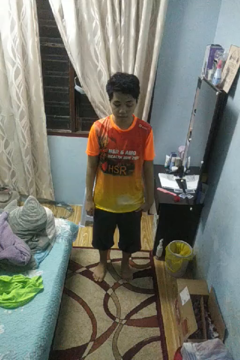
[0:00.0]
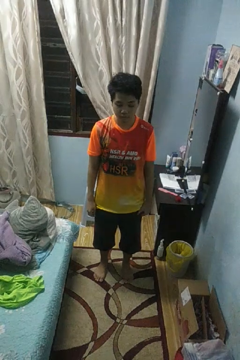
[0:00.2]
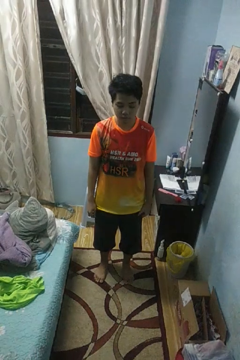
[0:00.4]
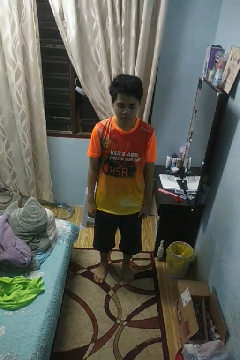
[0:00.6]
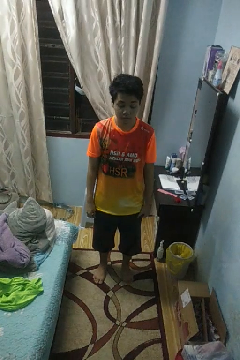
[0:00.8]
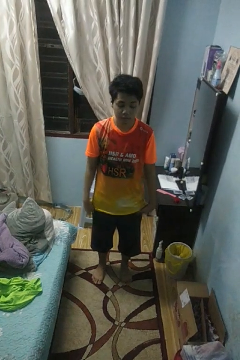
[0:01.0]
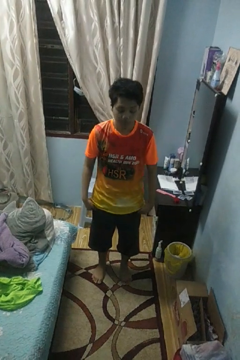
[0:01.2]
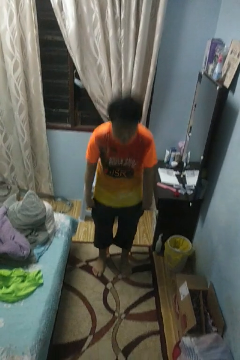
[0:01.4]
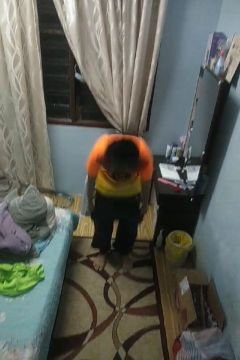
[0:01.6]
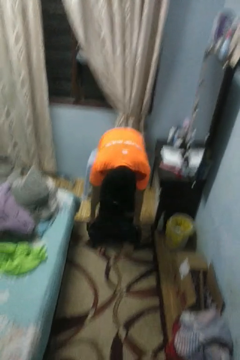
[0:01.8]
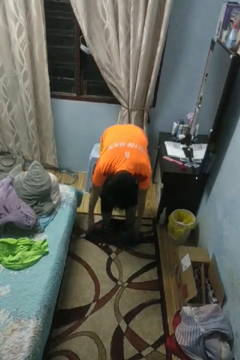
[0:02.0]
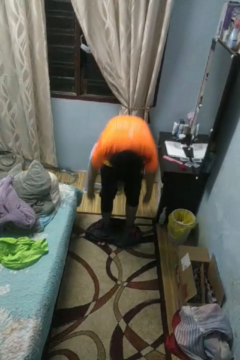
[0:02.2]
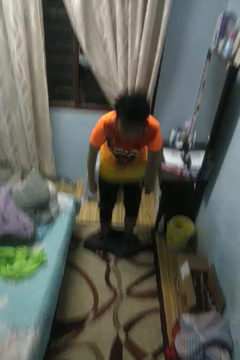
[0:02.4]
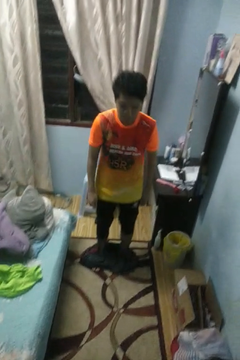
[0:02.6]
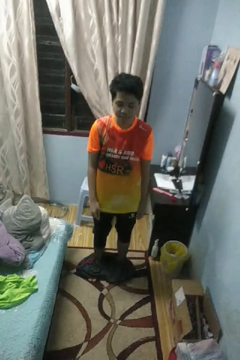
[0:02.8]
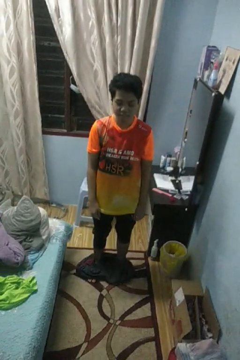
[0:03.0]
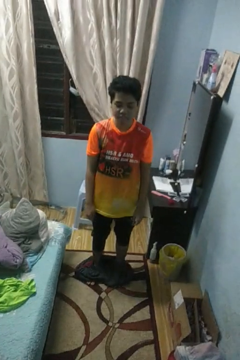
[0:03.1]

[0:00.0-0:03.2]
person takes off pants

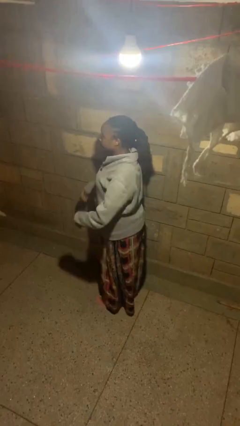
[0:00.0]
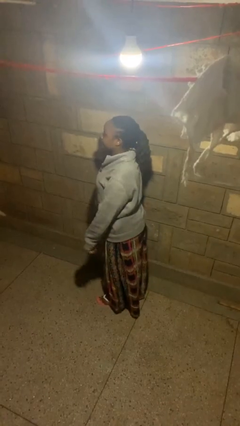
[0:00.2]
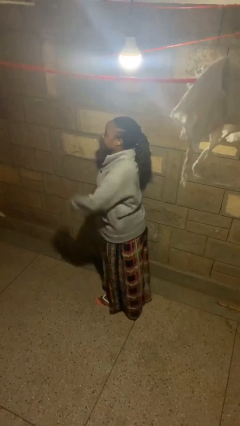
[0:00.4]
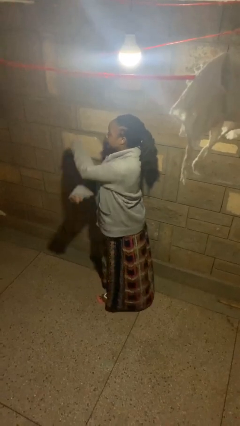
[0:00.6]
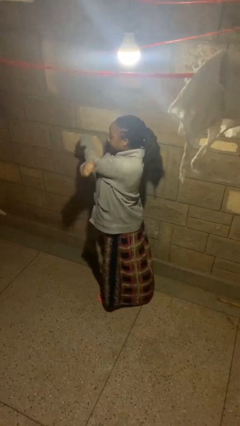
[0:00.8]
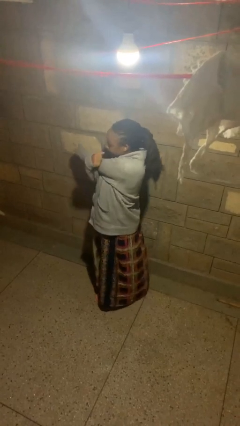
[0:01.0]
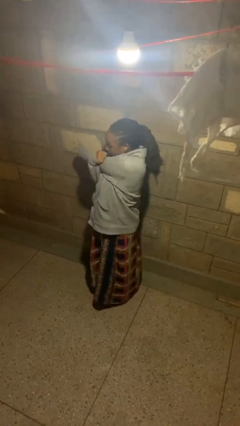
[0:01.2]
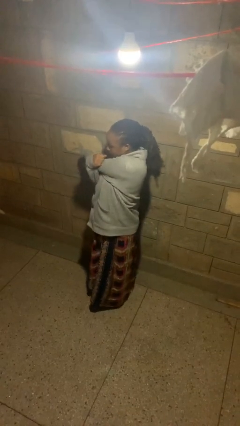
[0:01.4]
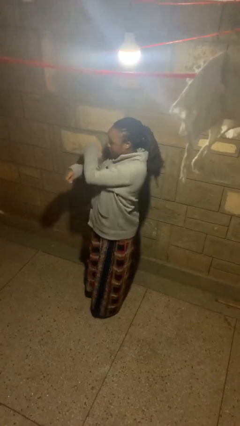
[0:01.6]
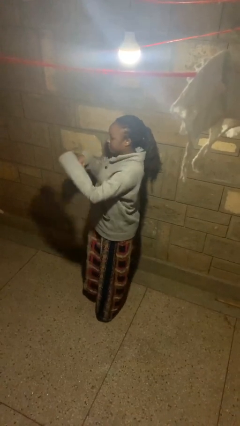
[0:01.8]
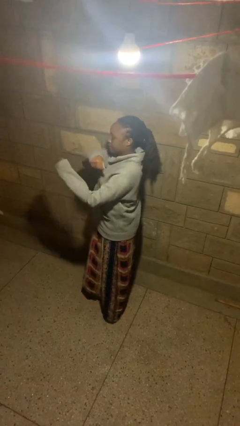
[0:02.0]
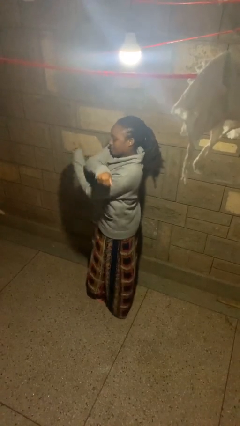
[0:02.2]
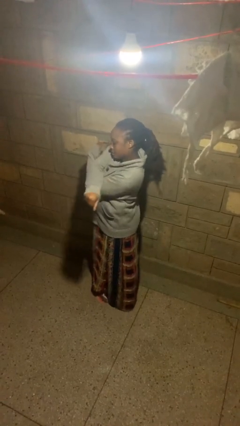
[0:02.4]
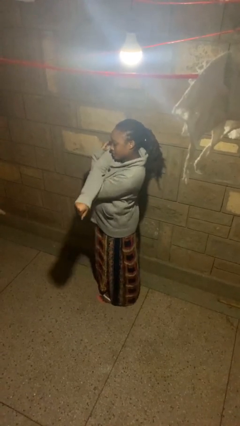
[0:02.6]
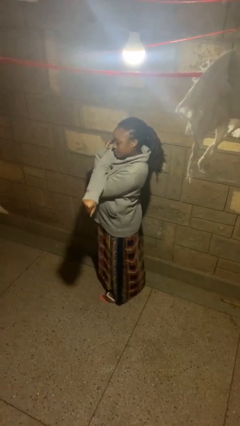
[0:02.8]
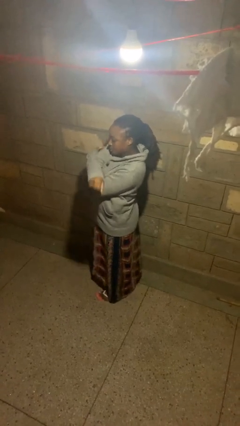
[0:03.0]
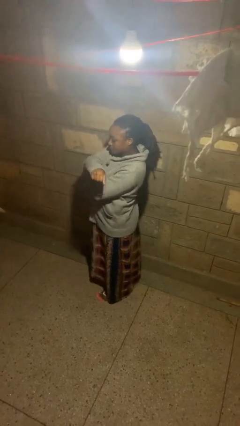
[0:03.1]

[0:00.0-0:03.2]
person stretches arms to side

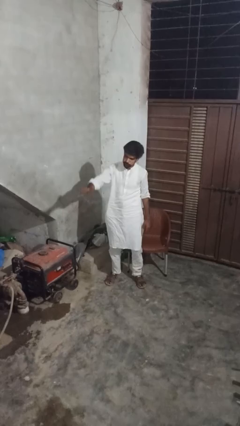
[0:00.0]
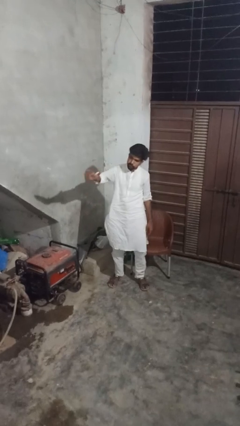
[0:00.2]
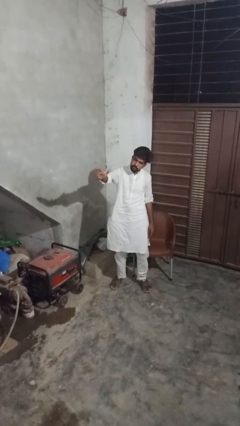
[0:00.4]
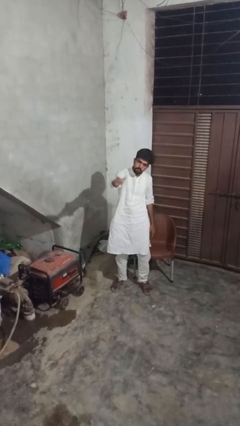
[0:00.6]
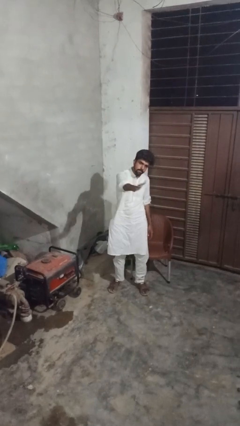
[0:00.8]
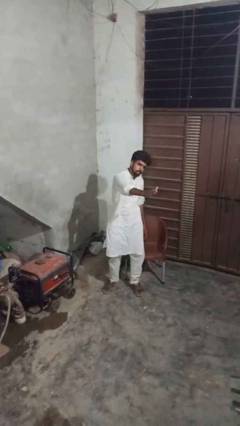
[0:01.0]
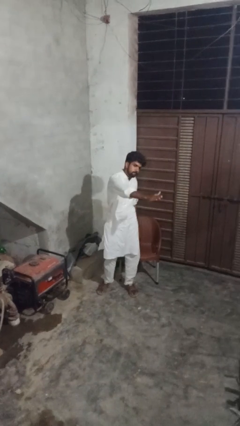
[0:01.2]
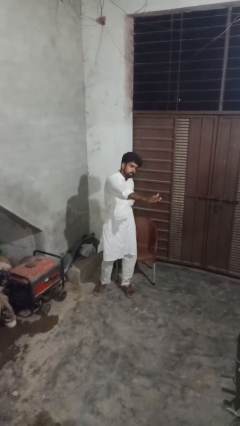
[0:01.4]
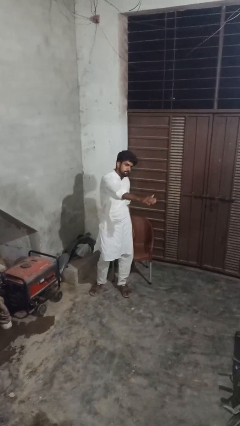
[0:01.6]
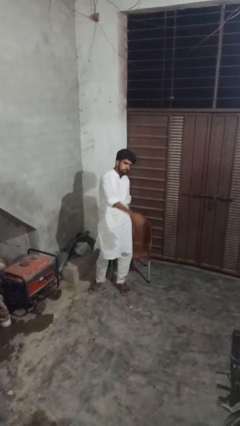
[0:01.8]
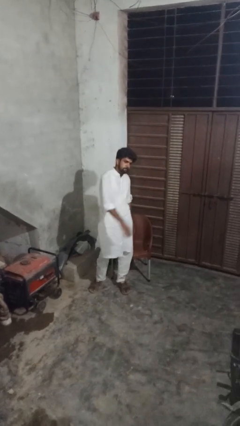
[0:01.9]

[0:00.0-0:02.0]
person gestures swipe left

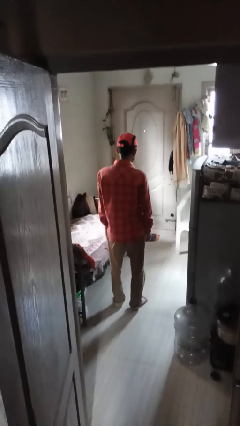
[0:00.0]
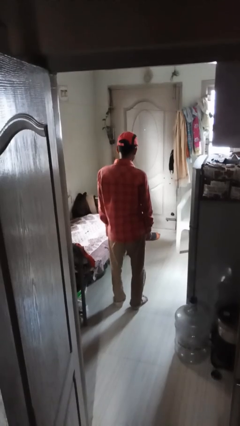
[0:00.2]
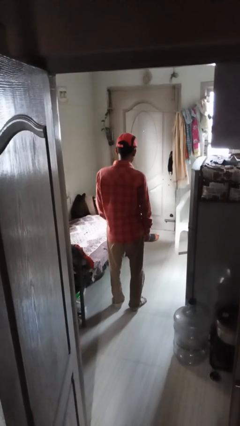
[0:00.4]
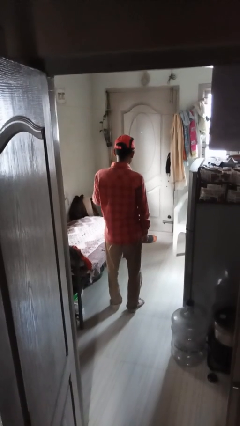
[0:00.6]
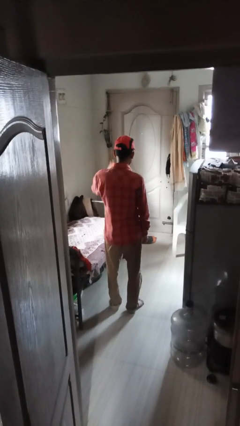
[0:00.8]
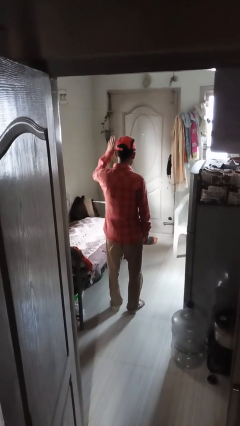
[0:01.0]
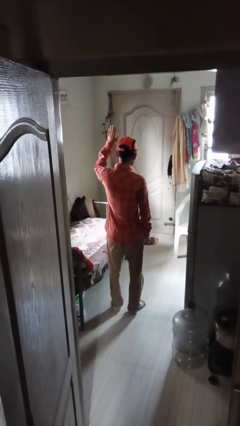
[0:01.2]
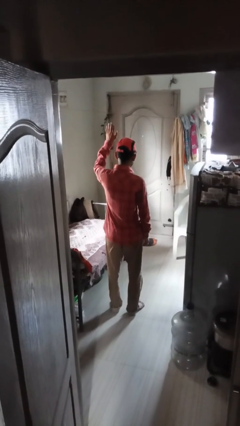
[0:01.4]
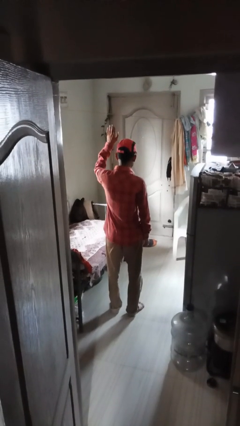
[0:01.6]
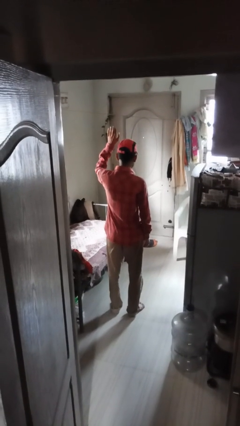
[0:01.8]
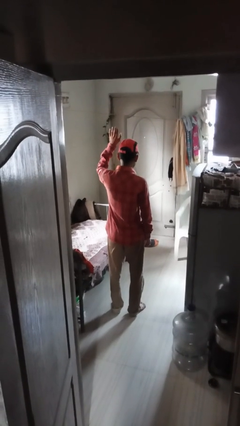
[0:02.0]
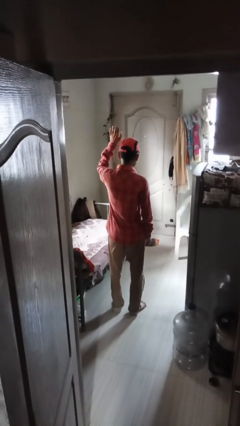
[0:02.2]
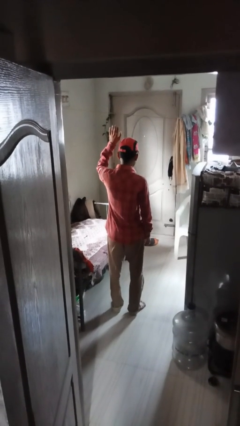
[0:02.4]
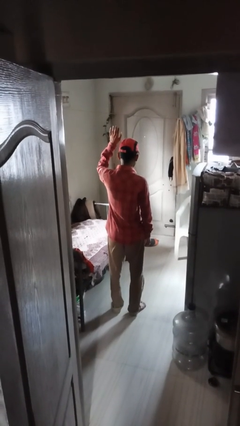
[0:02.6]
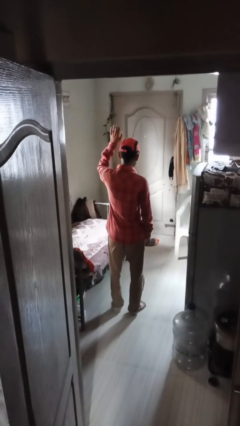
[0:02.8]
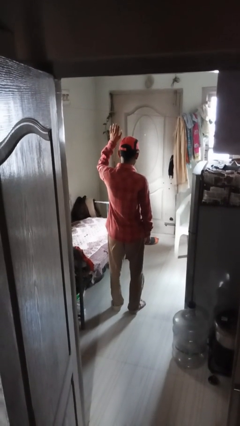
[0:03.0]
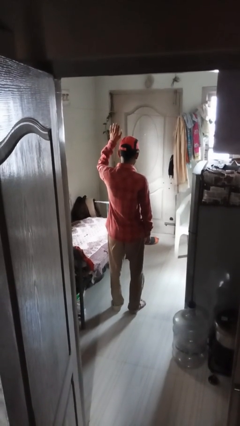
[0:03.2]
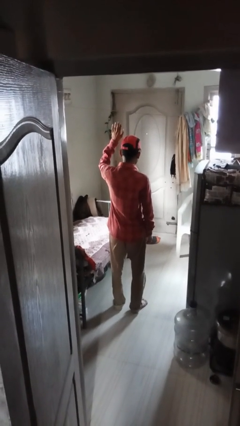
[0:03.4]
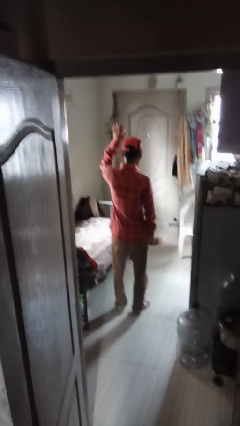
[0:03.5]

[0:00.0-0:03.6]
person gestures raise hand

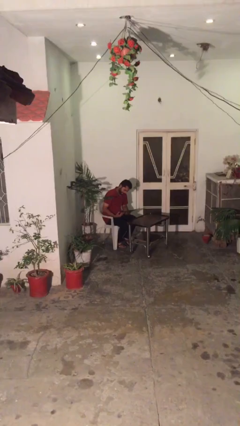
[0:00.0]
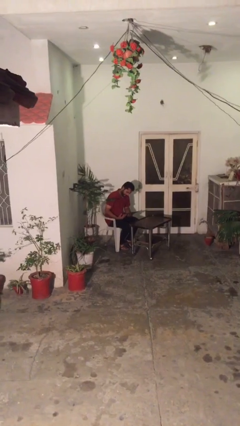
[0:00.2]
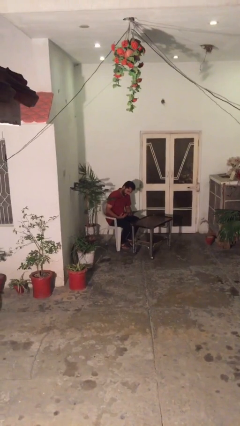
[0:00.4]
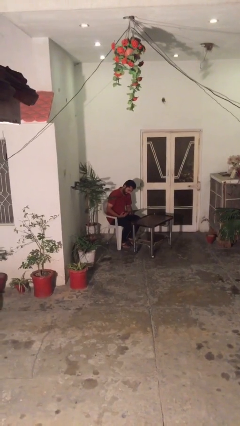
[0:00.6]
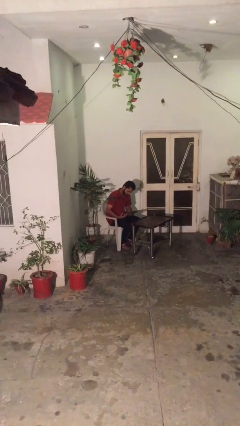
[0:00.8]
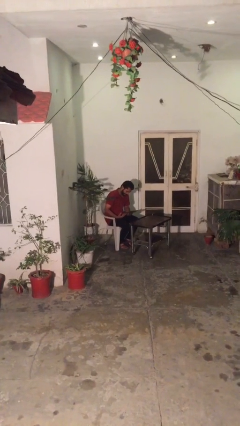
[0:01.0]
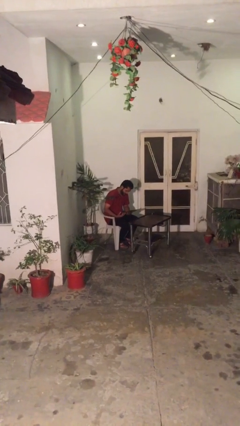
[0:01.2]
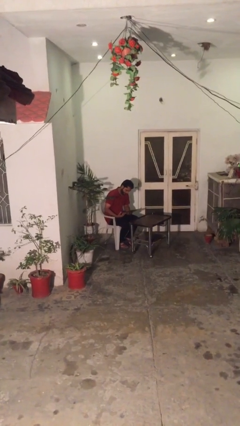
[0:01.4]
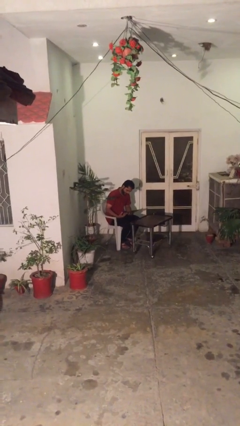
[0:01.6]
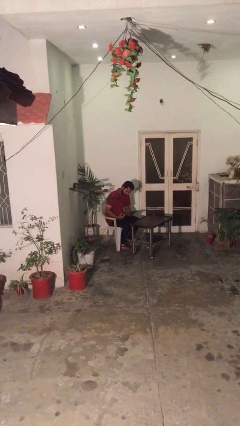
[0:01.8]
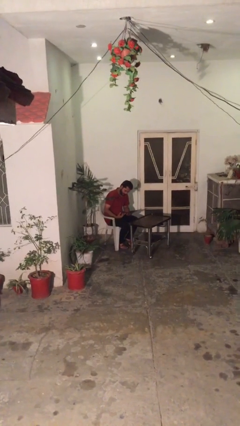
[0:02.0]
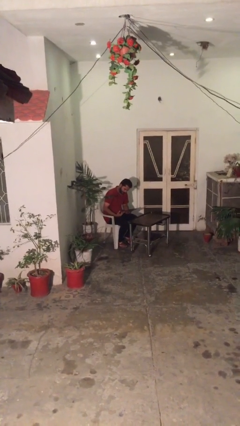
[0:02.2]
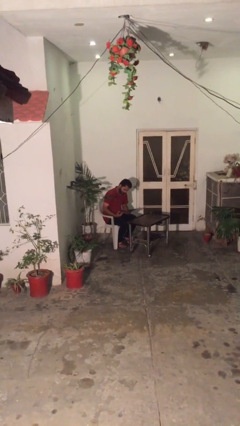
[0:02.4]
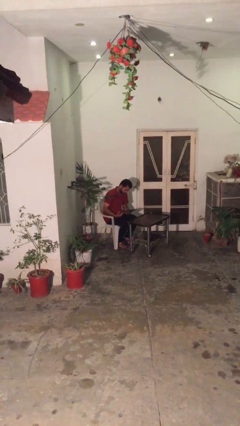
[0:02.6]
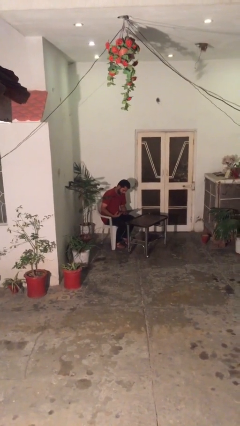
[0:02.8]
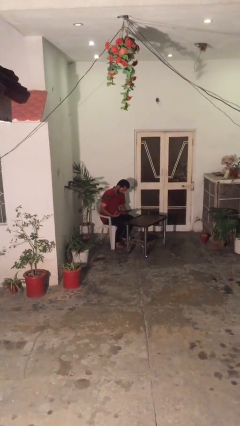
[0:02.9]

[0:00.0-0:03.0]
person reads document

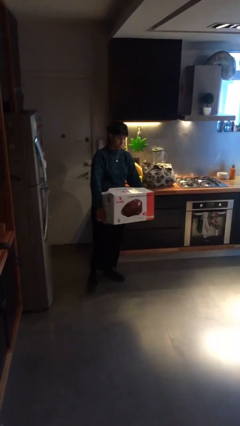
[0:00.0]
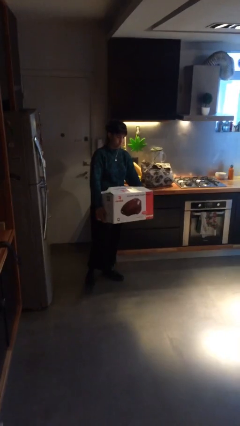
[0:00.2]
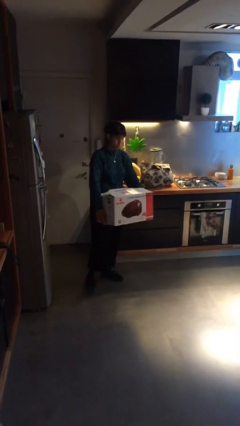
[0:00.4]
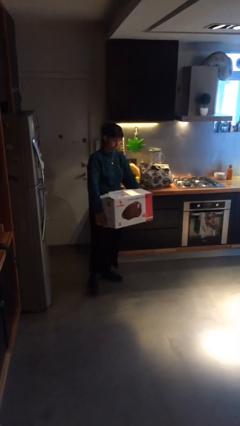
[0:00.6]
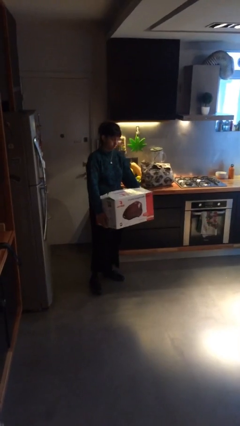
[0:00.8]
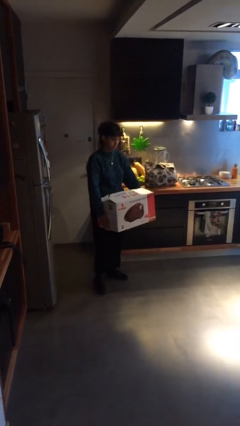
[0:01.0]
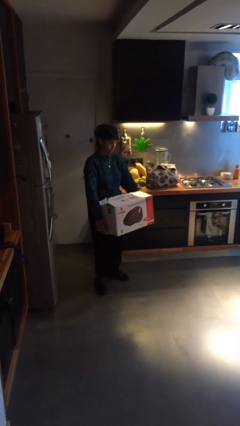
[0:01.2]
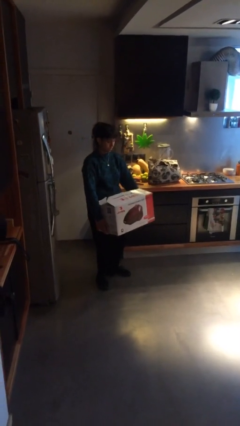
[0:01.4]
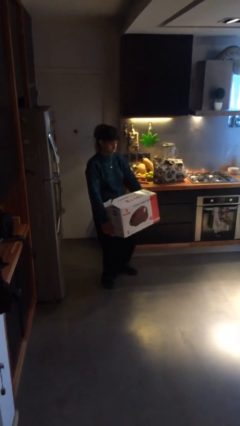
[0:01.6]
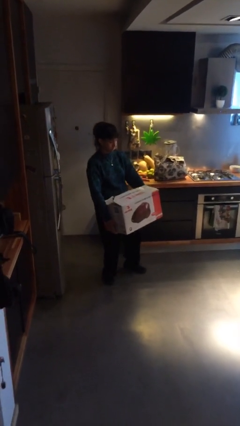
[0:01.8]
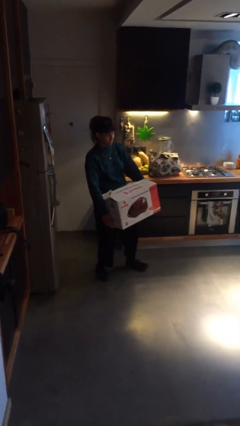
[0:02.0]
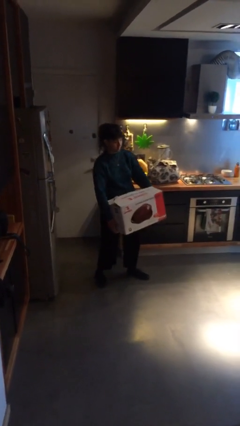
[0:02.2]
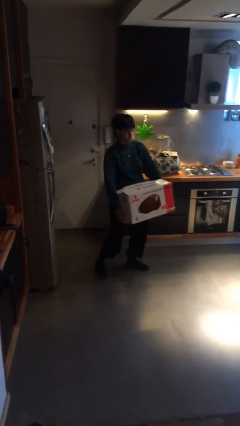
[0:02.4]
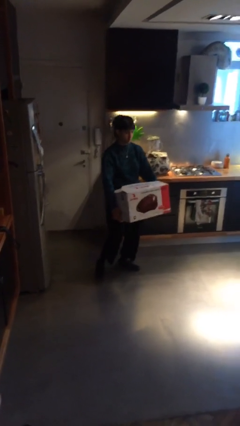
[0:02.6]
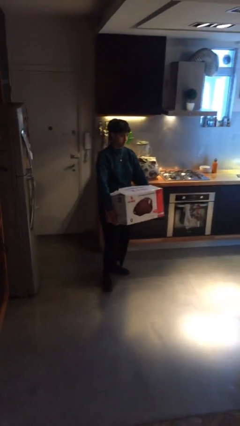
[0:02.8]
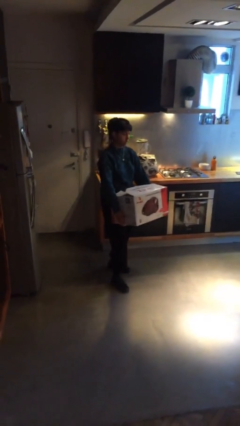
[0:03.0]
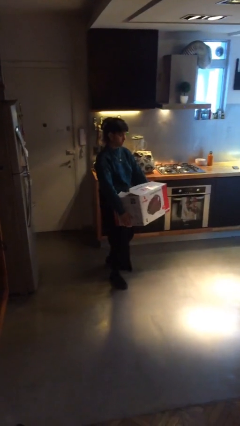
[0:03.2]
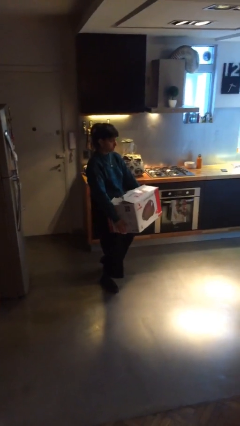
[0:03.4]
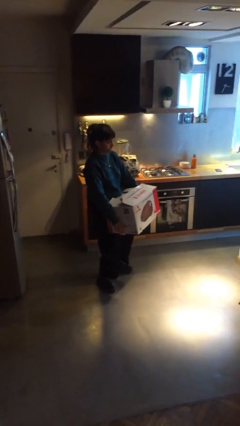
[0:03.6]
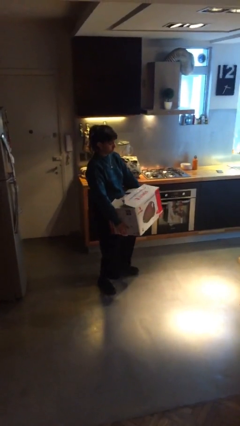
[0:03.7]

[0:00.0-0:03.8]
person carries heavy object
